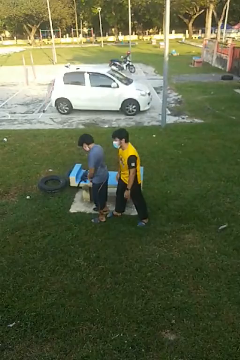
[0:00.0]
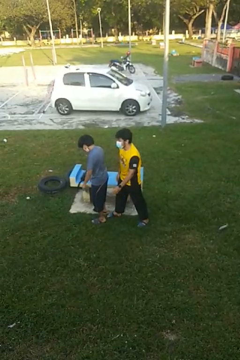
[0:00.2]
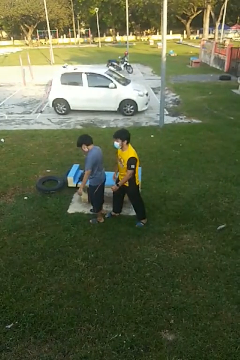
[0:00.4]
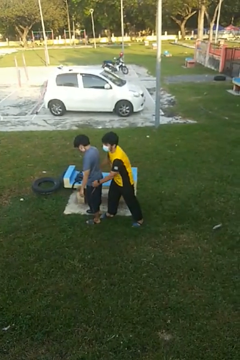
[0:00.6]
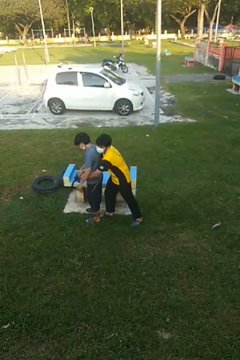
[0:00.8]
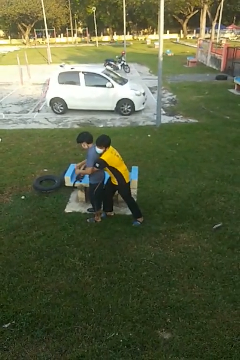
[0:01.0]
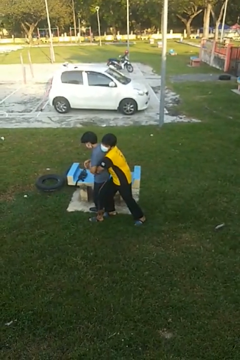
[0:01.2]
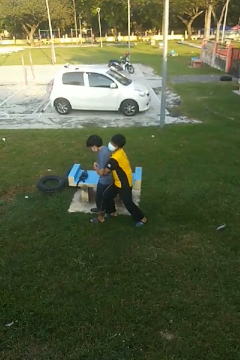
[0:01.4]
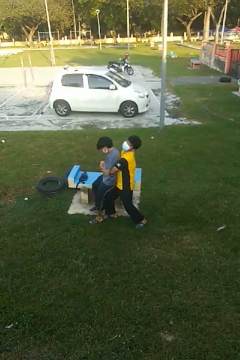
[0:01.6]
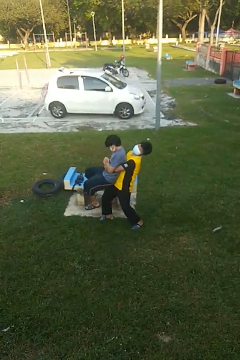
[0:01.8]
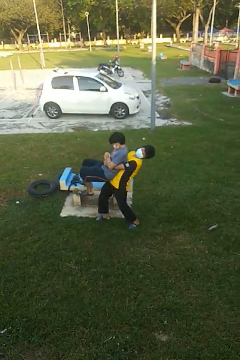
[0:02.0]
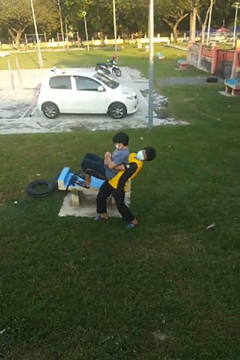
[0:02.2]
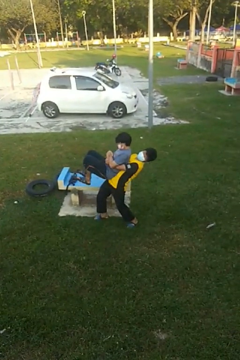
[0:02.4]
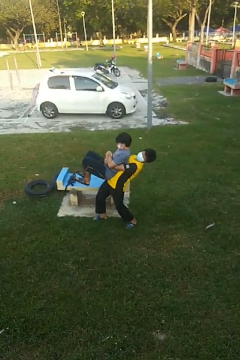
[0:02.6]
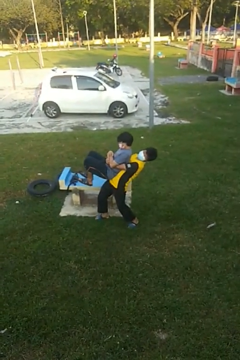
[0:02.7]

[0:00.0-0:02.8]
person picks up person

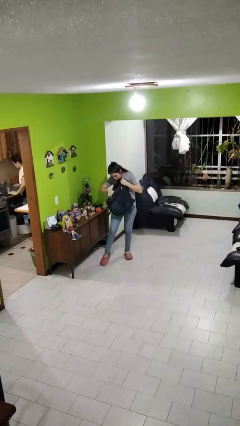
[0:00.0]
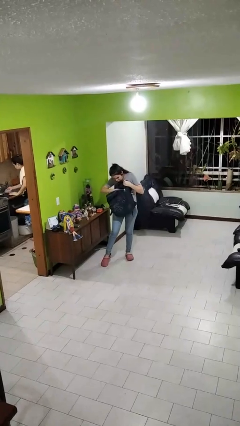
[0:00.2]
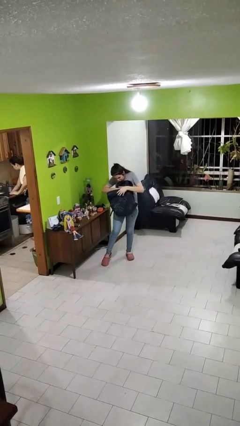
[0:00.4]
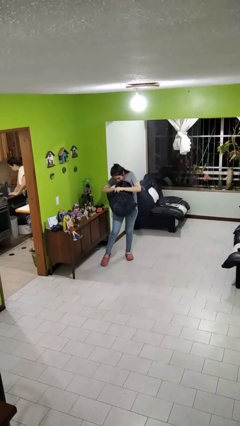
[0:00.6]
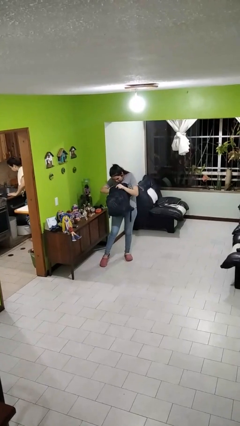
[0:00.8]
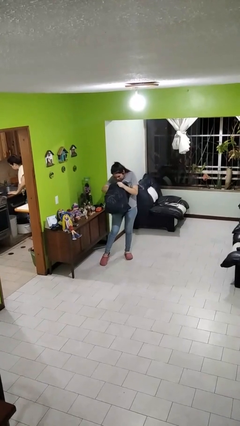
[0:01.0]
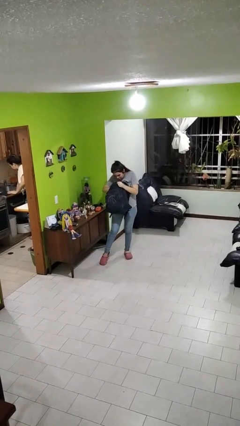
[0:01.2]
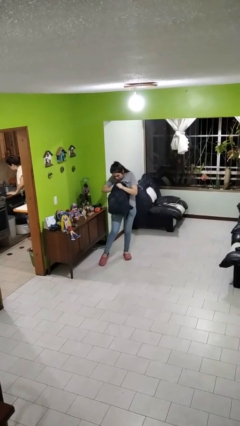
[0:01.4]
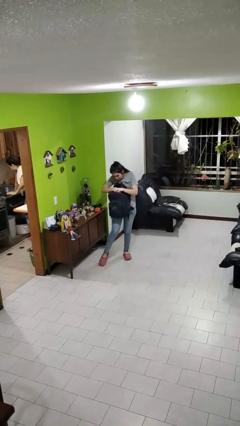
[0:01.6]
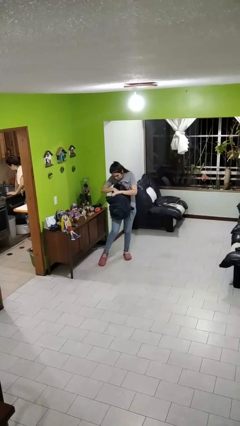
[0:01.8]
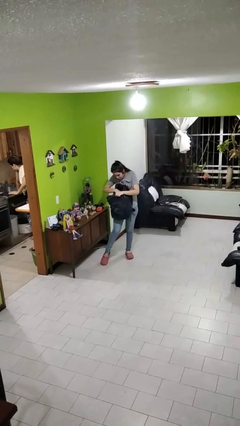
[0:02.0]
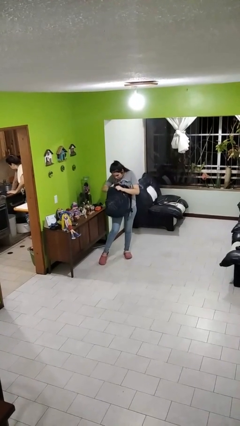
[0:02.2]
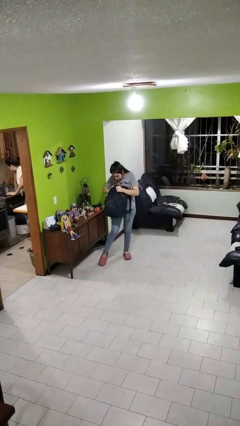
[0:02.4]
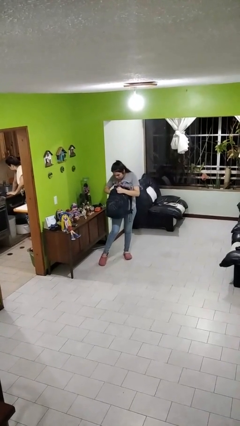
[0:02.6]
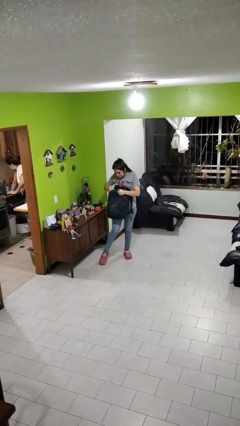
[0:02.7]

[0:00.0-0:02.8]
person searches in backpack

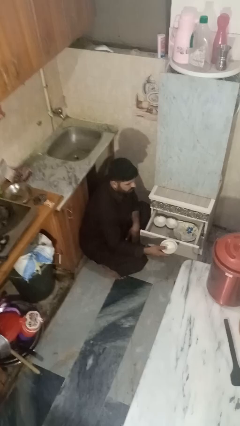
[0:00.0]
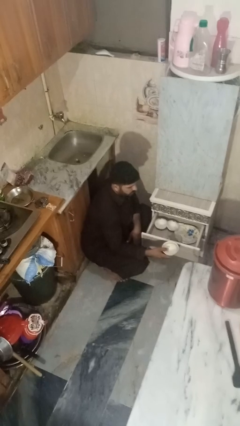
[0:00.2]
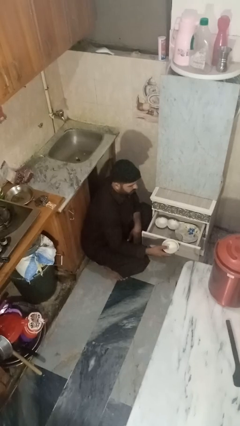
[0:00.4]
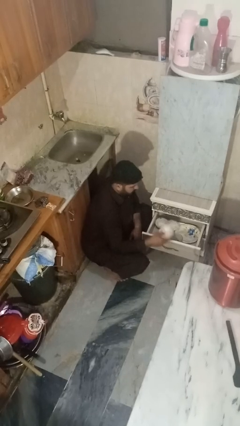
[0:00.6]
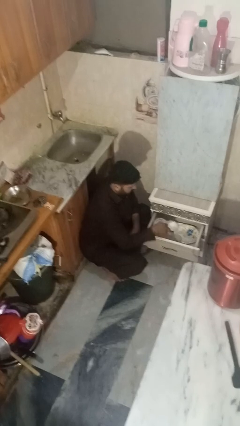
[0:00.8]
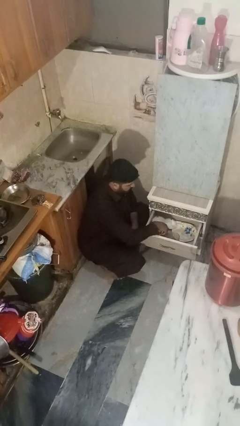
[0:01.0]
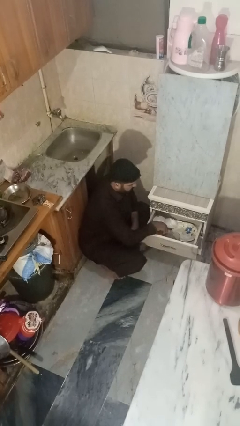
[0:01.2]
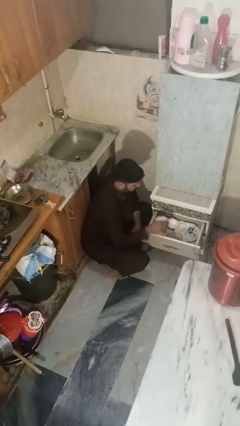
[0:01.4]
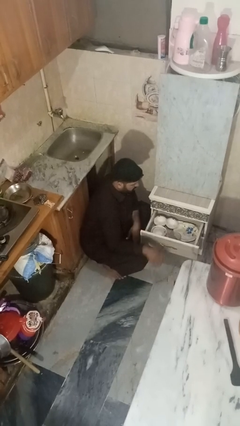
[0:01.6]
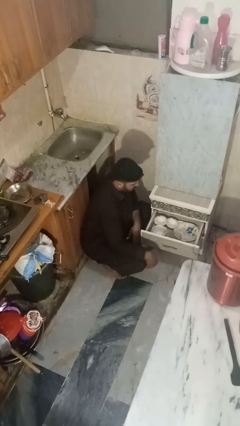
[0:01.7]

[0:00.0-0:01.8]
person puts object into kitchen drawer

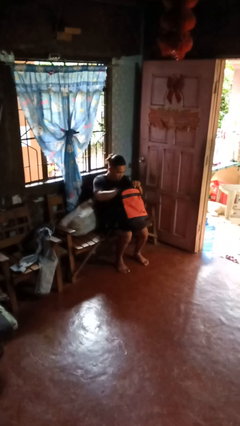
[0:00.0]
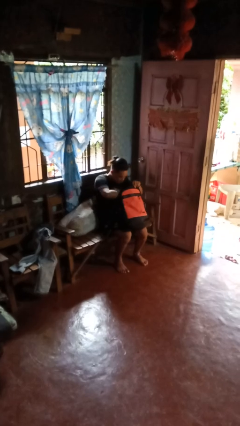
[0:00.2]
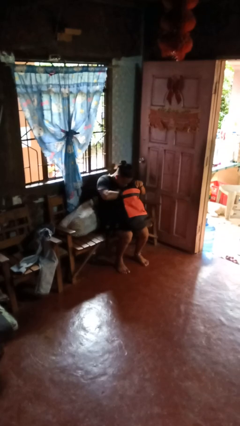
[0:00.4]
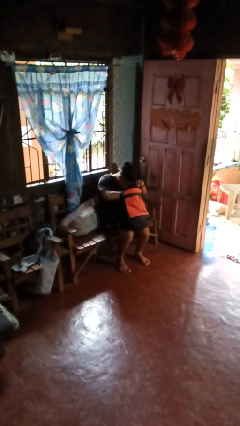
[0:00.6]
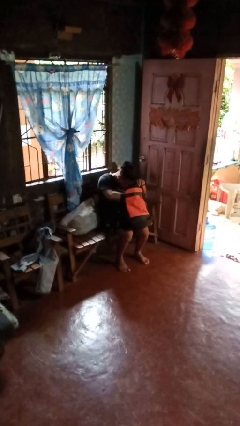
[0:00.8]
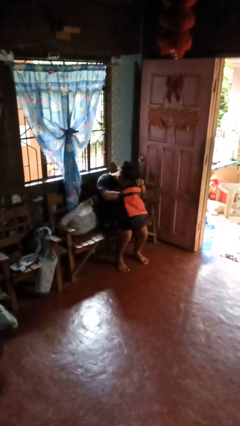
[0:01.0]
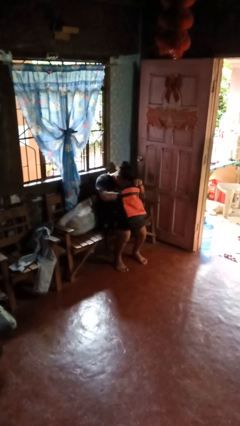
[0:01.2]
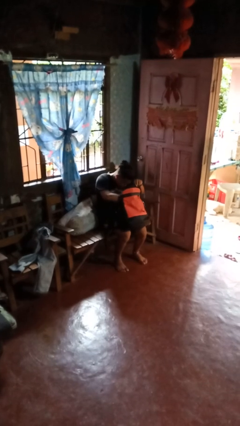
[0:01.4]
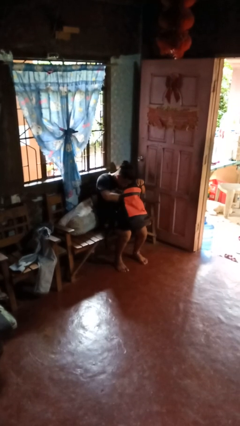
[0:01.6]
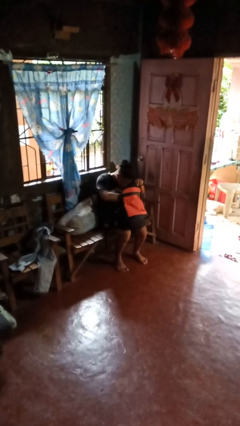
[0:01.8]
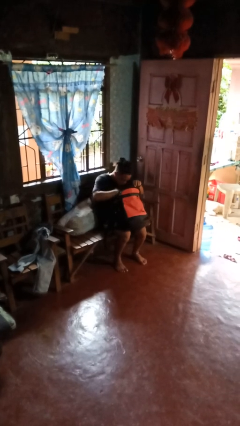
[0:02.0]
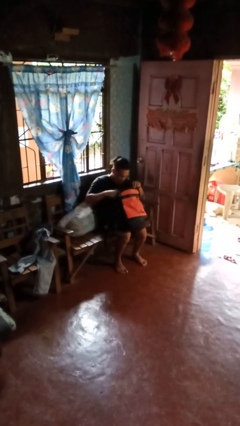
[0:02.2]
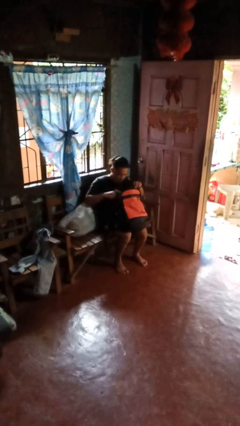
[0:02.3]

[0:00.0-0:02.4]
person searches in bag

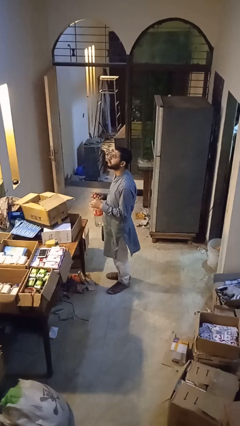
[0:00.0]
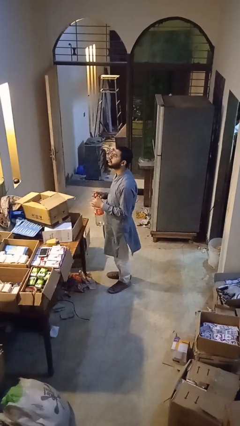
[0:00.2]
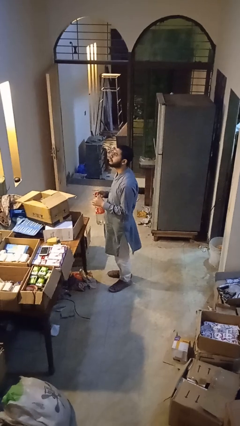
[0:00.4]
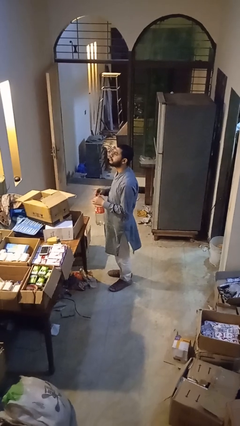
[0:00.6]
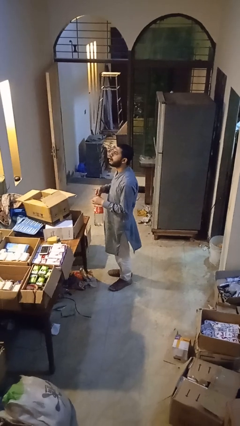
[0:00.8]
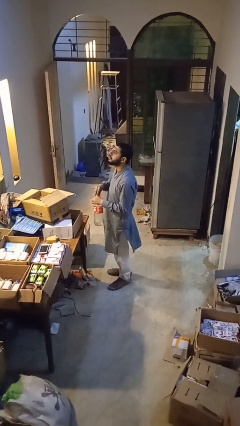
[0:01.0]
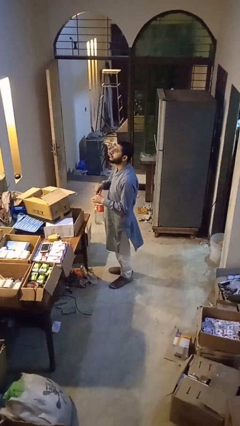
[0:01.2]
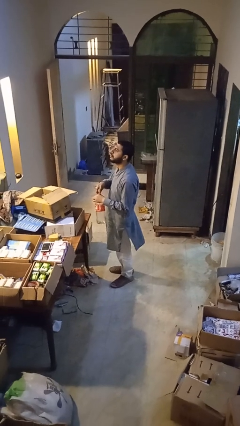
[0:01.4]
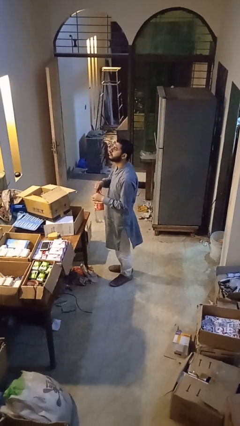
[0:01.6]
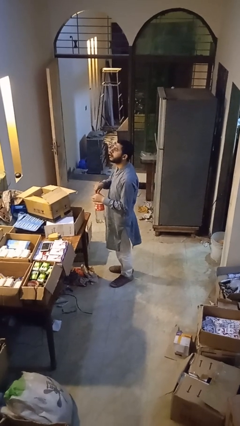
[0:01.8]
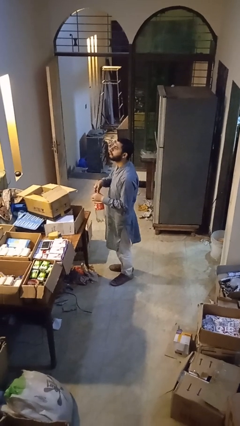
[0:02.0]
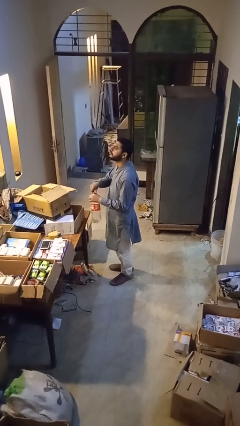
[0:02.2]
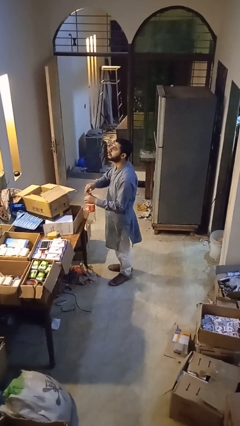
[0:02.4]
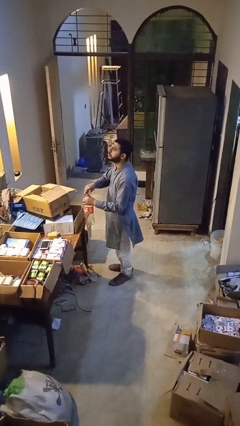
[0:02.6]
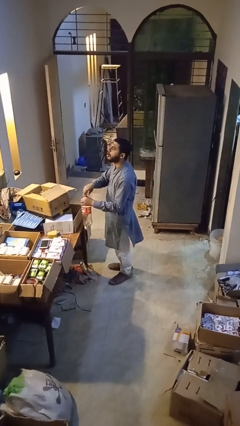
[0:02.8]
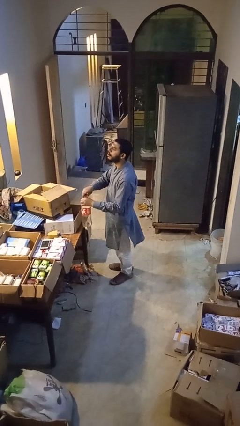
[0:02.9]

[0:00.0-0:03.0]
person screws lid to bottle

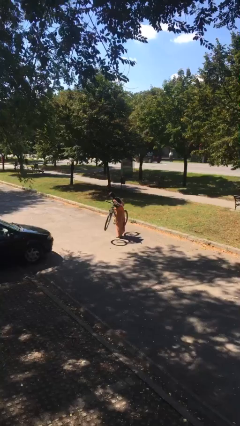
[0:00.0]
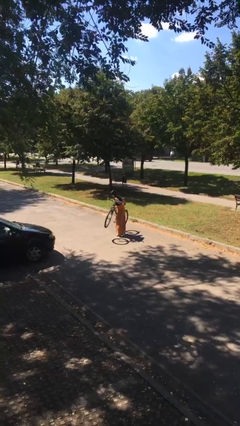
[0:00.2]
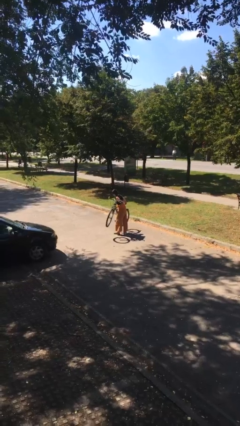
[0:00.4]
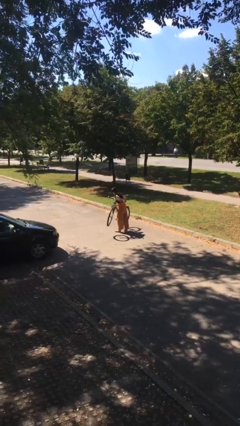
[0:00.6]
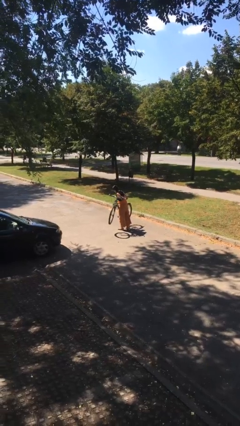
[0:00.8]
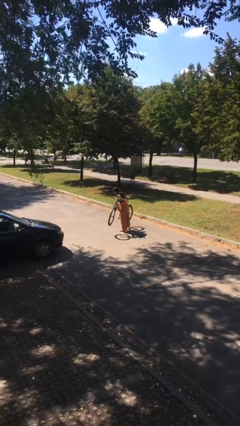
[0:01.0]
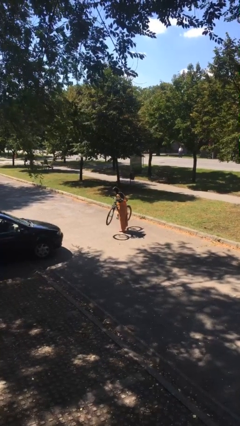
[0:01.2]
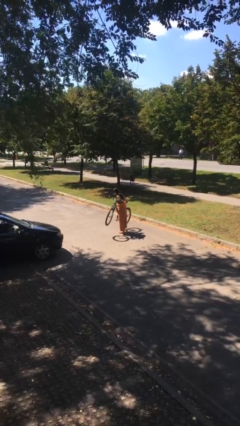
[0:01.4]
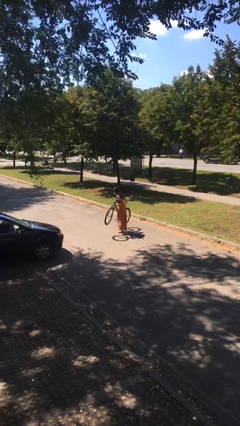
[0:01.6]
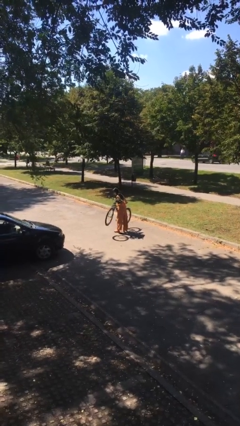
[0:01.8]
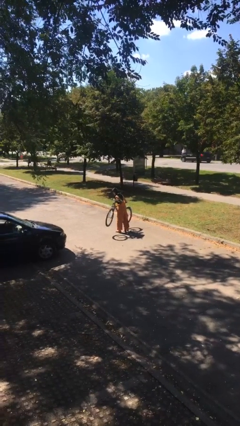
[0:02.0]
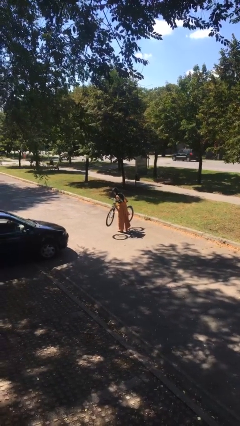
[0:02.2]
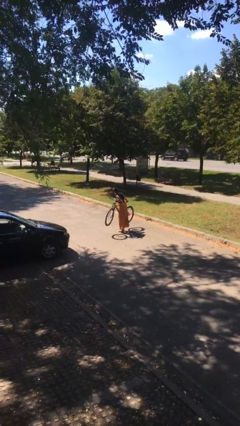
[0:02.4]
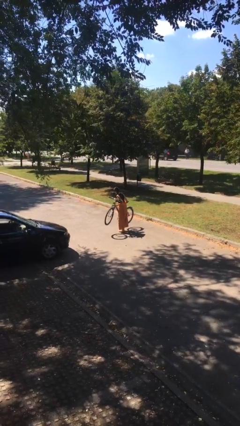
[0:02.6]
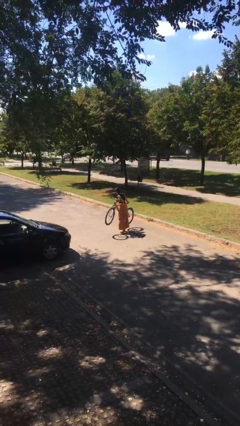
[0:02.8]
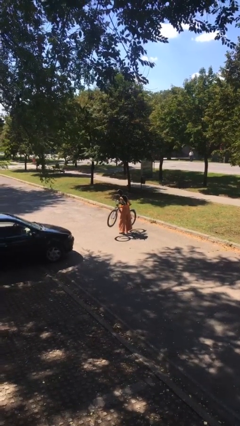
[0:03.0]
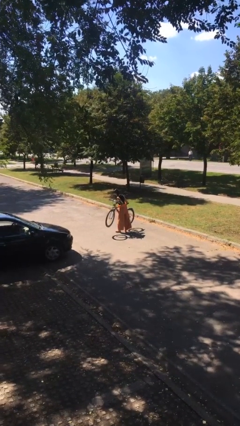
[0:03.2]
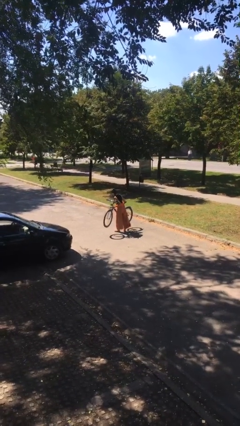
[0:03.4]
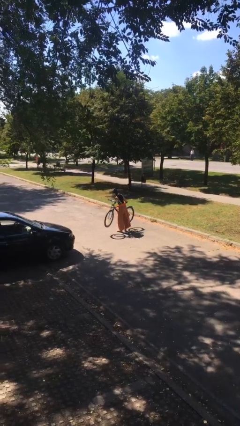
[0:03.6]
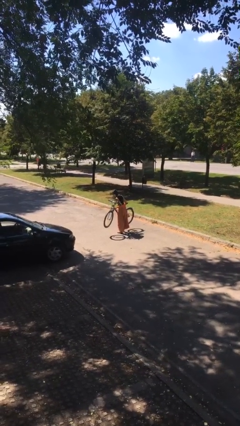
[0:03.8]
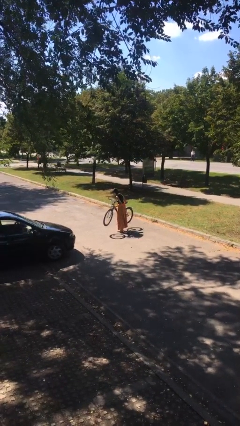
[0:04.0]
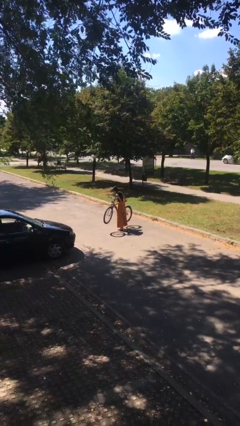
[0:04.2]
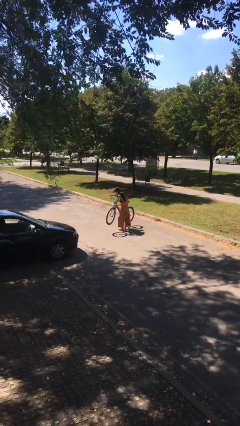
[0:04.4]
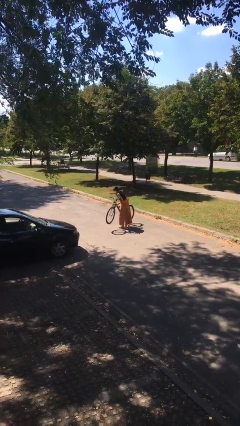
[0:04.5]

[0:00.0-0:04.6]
person carries heavy object
